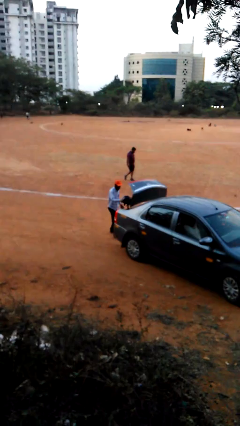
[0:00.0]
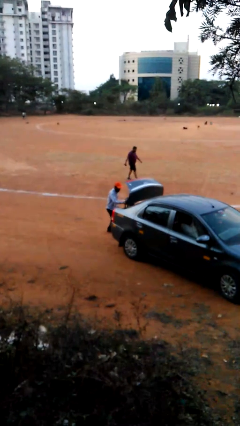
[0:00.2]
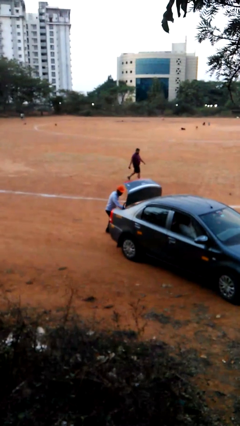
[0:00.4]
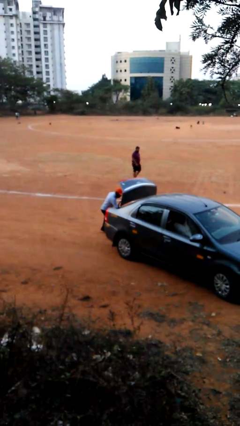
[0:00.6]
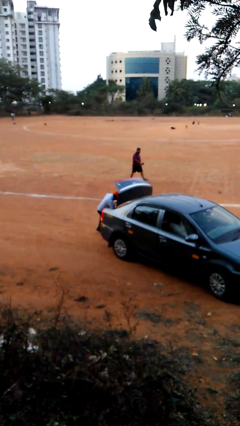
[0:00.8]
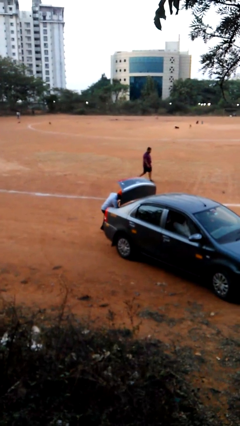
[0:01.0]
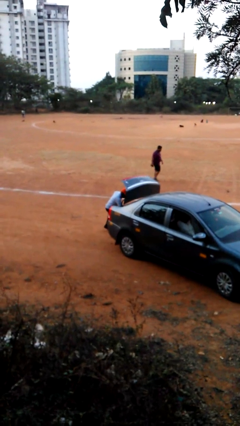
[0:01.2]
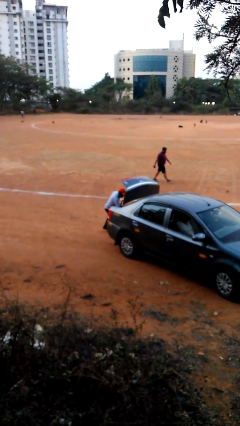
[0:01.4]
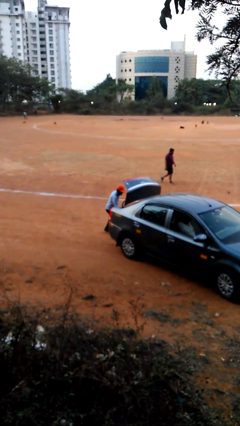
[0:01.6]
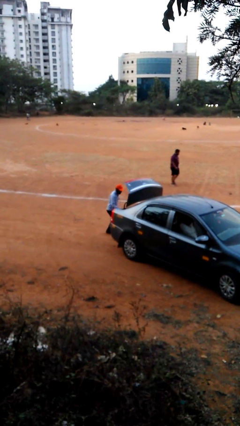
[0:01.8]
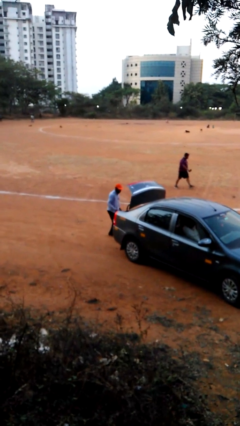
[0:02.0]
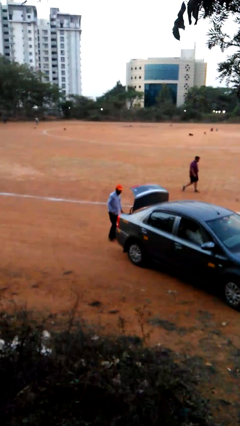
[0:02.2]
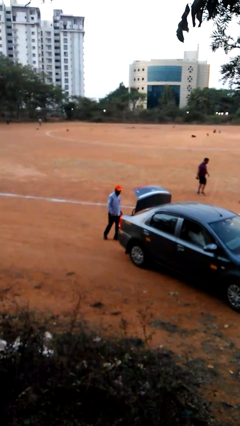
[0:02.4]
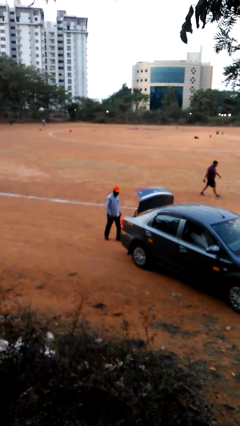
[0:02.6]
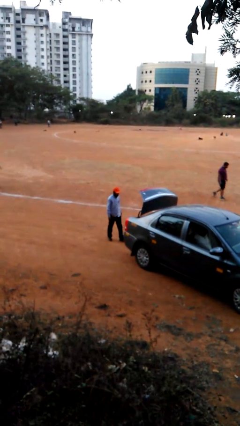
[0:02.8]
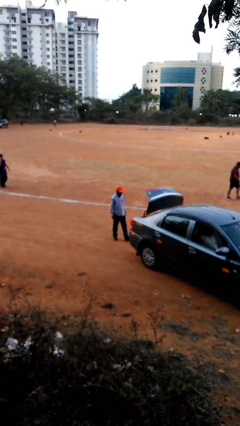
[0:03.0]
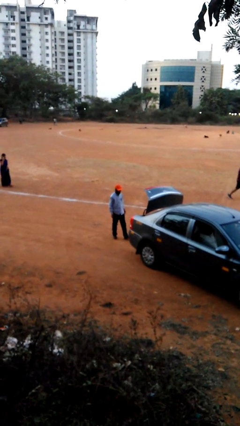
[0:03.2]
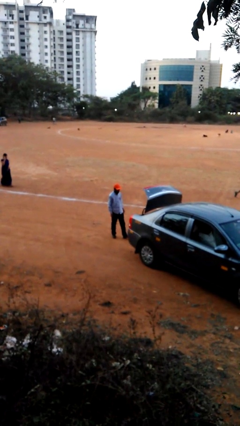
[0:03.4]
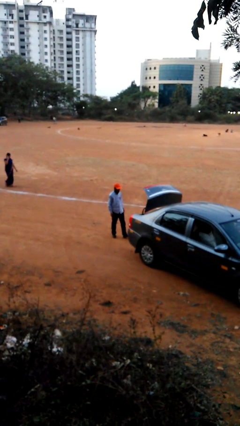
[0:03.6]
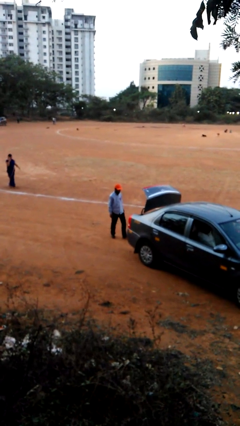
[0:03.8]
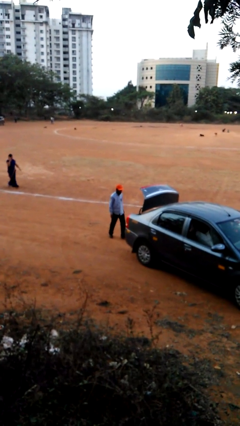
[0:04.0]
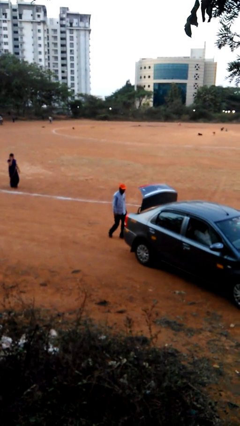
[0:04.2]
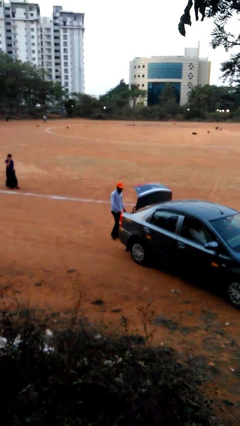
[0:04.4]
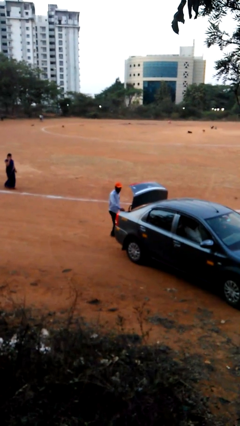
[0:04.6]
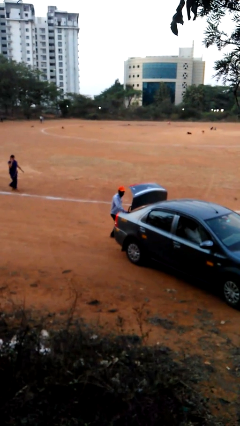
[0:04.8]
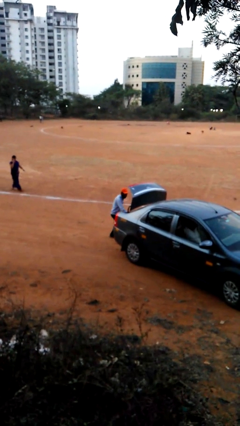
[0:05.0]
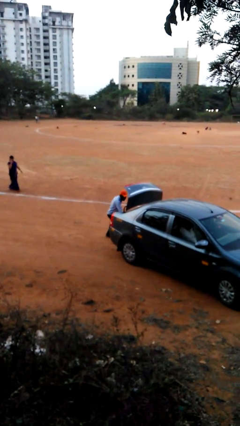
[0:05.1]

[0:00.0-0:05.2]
person loads car

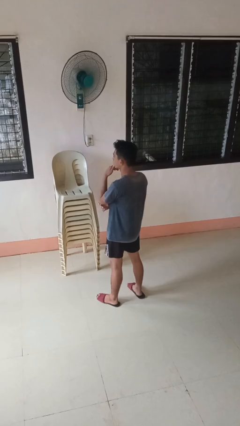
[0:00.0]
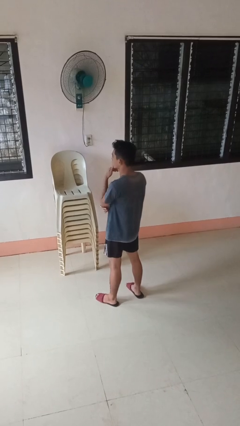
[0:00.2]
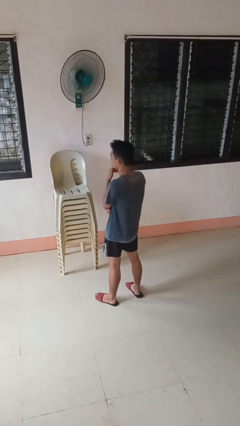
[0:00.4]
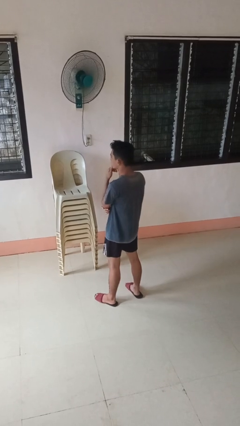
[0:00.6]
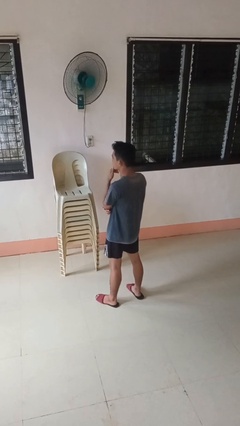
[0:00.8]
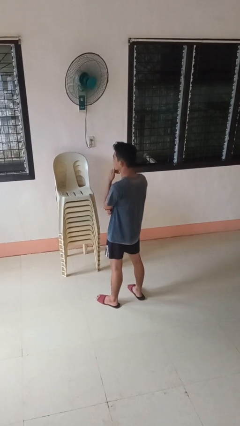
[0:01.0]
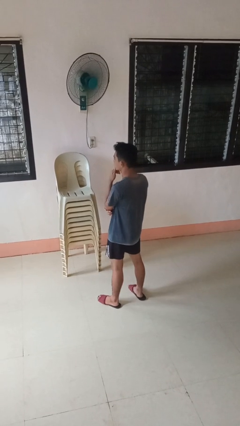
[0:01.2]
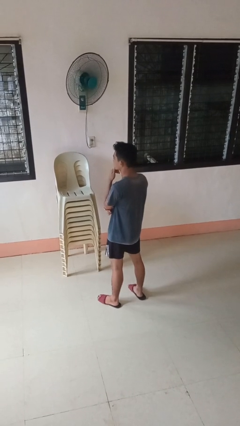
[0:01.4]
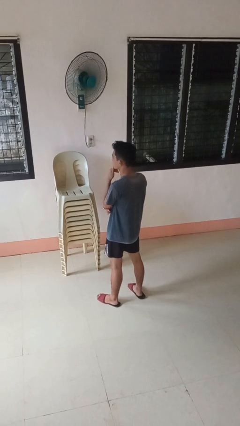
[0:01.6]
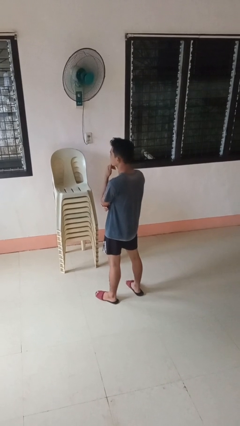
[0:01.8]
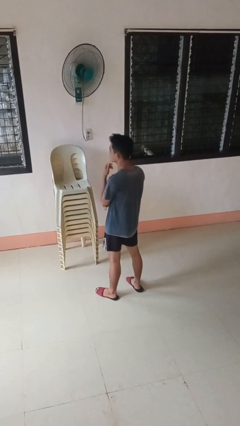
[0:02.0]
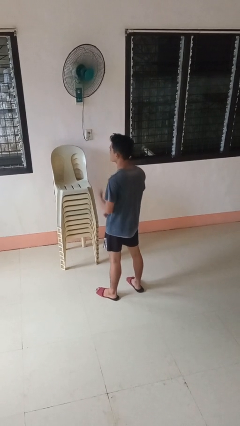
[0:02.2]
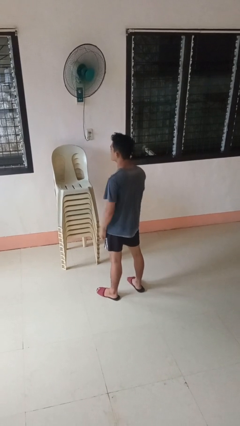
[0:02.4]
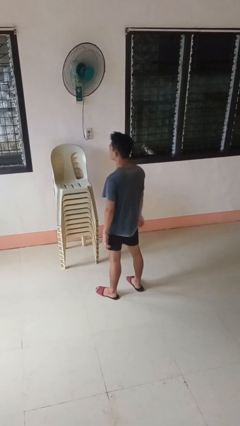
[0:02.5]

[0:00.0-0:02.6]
person strokes chin

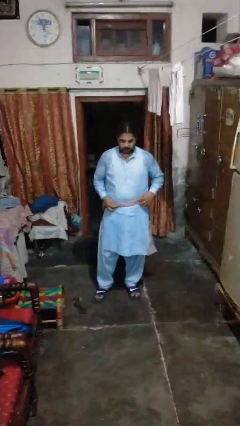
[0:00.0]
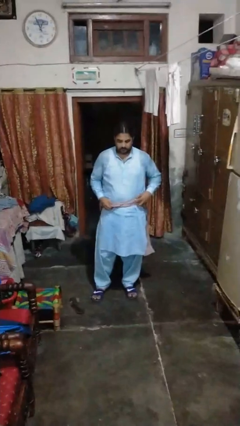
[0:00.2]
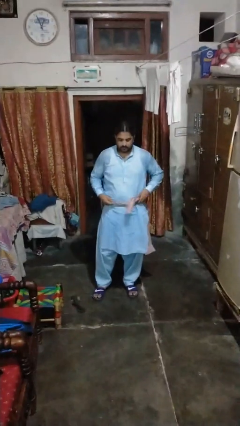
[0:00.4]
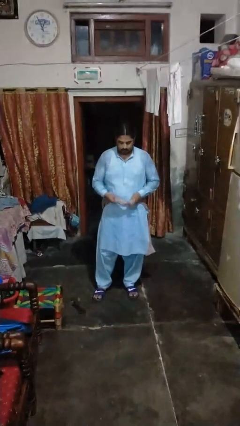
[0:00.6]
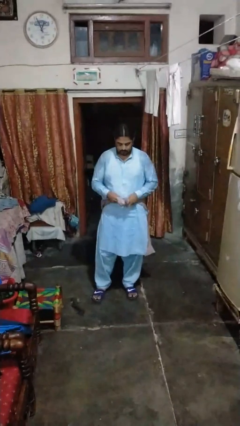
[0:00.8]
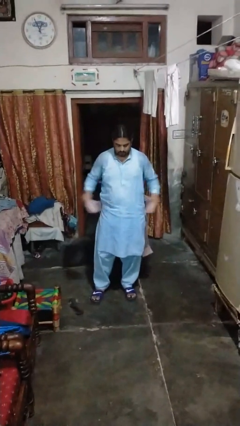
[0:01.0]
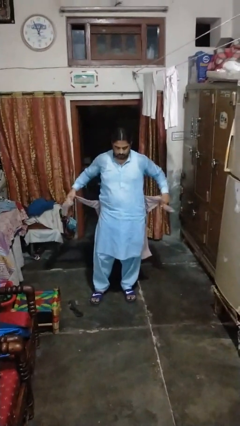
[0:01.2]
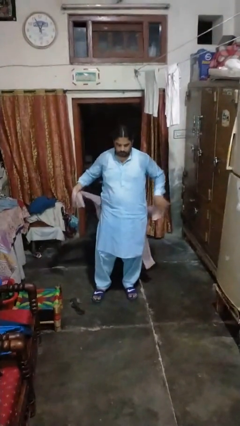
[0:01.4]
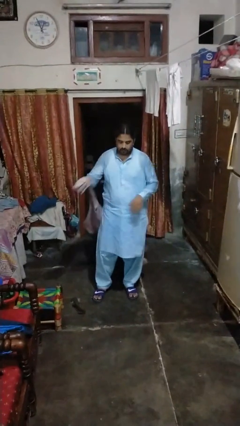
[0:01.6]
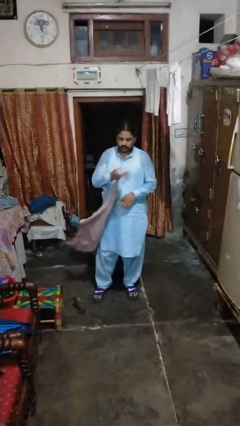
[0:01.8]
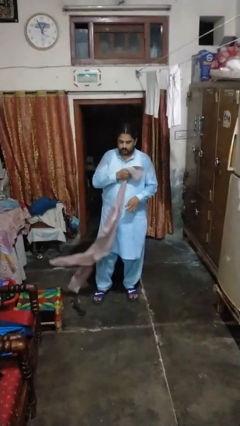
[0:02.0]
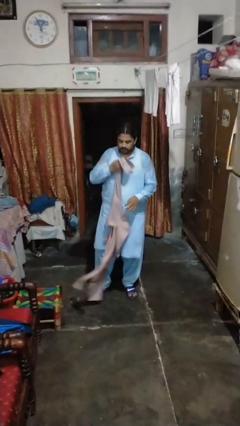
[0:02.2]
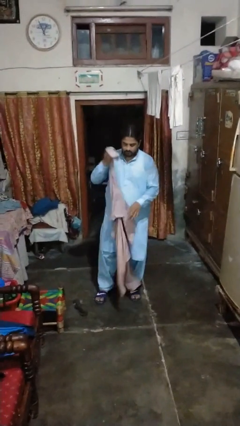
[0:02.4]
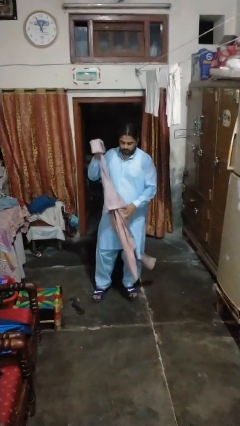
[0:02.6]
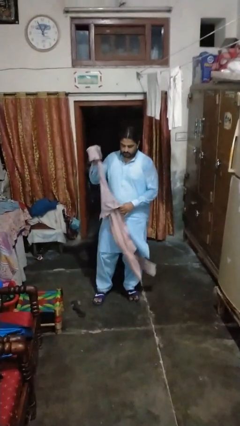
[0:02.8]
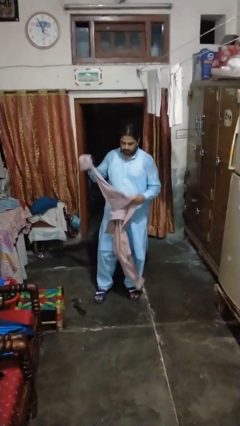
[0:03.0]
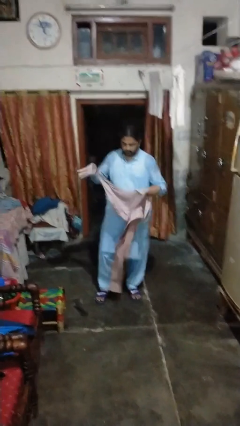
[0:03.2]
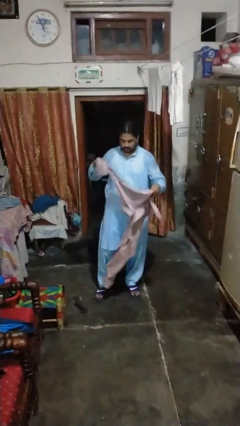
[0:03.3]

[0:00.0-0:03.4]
person unties jacket around waist

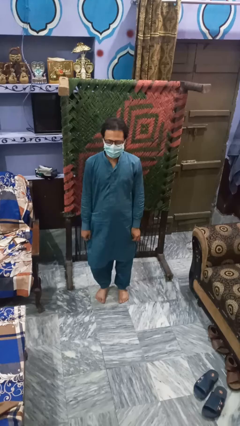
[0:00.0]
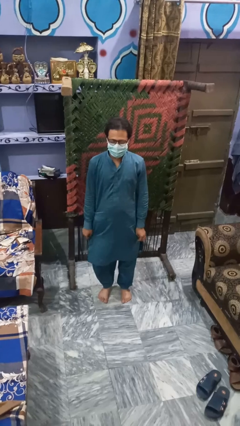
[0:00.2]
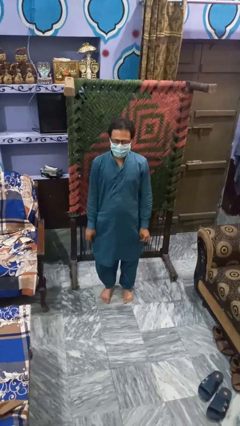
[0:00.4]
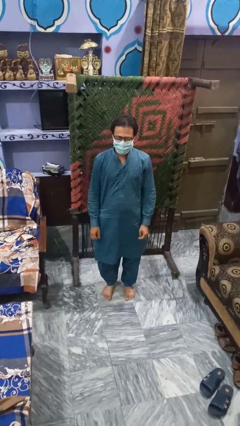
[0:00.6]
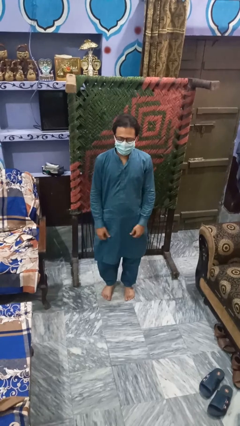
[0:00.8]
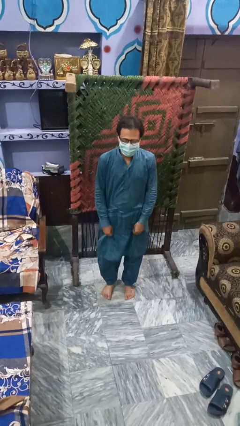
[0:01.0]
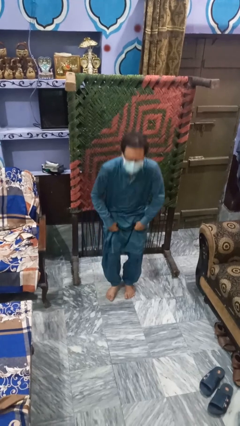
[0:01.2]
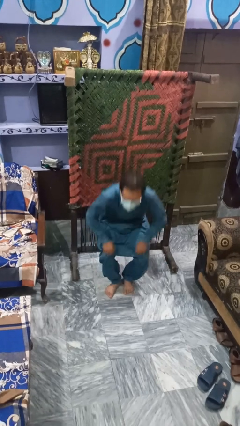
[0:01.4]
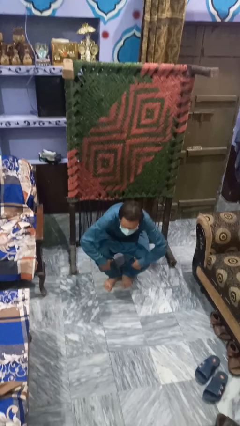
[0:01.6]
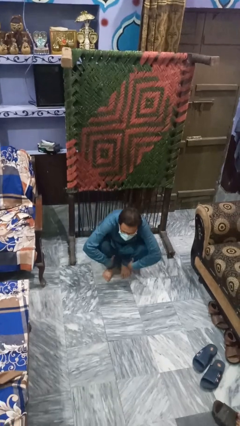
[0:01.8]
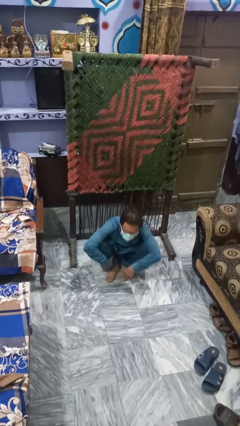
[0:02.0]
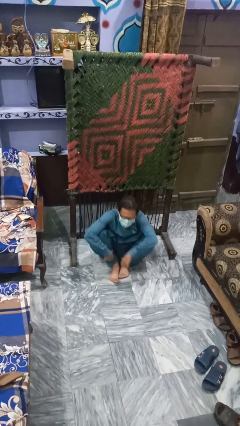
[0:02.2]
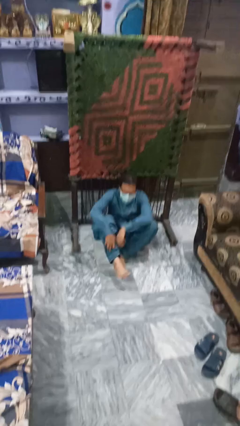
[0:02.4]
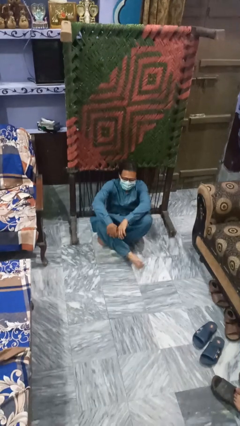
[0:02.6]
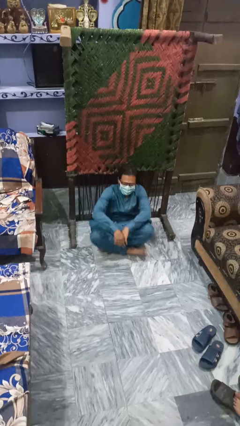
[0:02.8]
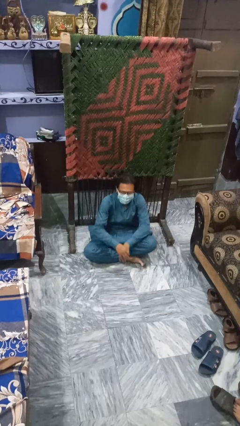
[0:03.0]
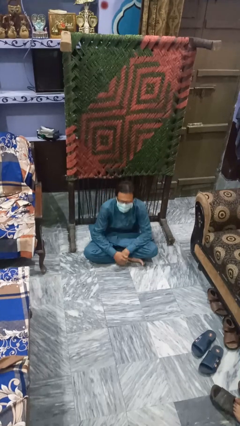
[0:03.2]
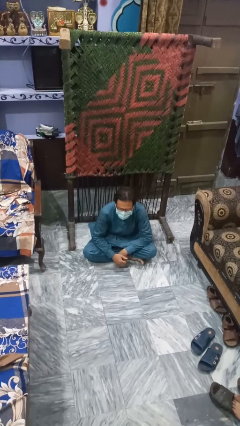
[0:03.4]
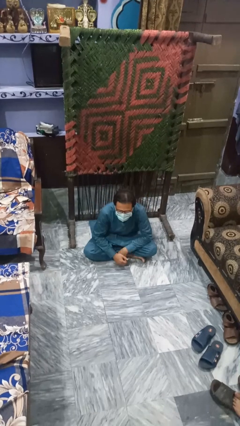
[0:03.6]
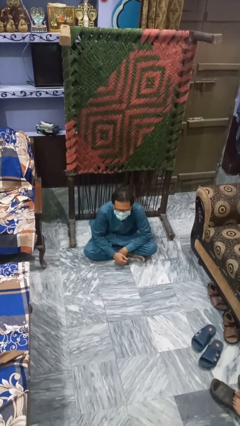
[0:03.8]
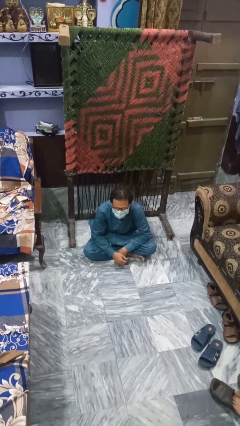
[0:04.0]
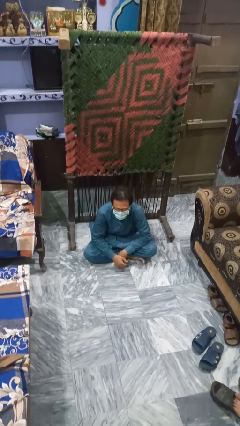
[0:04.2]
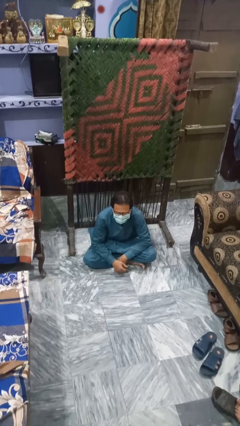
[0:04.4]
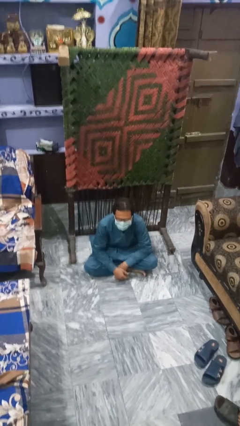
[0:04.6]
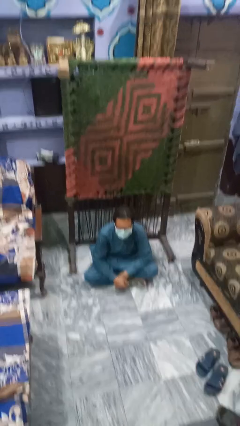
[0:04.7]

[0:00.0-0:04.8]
person sits crisscross

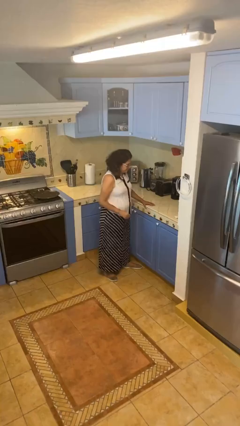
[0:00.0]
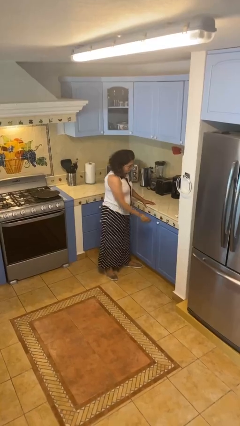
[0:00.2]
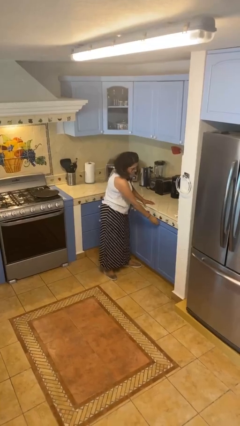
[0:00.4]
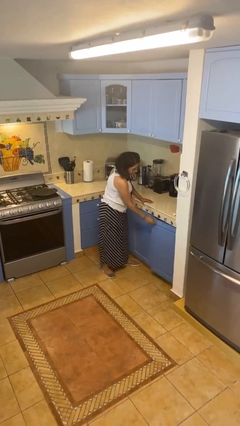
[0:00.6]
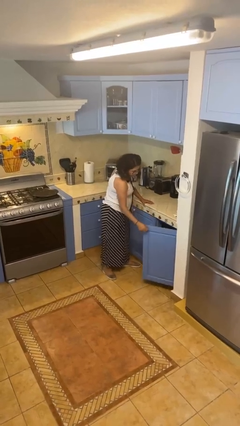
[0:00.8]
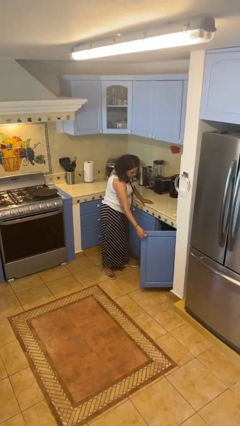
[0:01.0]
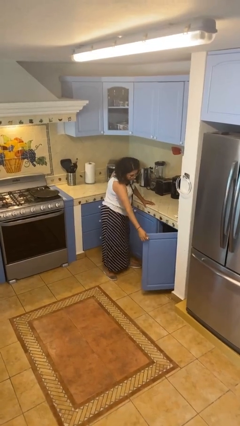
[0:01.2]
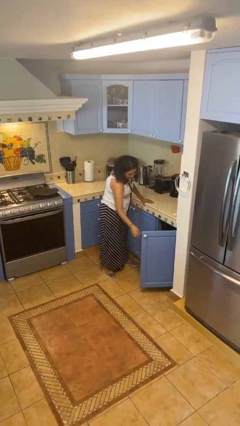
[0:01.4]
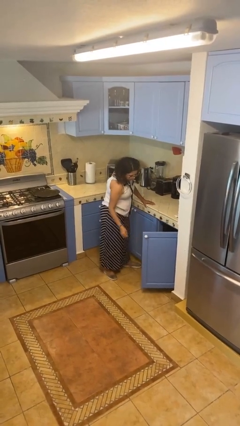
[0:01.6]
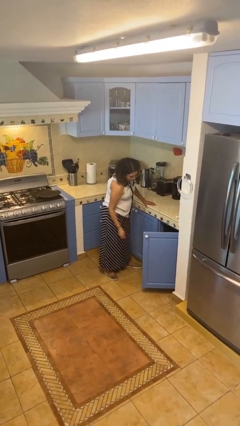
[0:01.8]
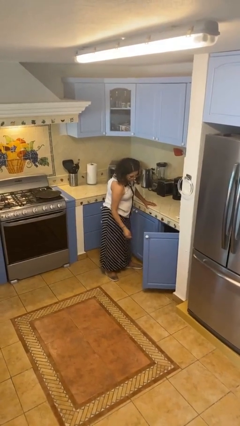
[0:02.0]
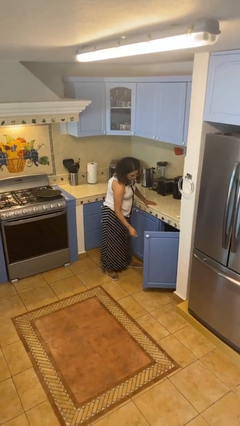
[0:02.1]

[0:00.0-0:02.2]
person opens cabinet
